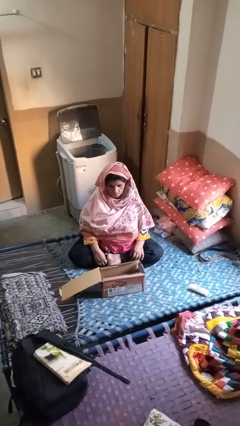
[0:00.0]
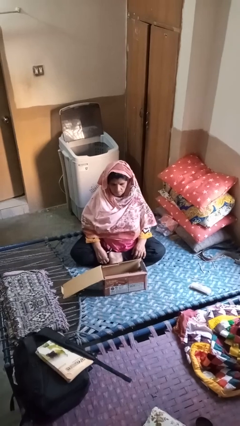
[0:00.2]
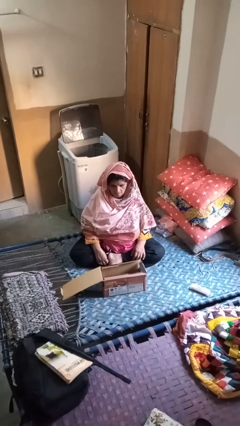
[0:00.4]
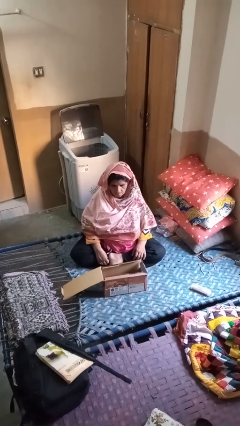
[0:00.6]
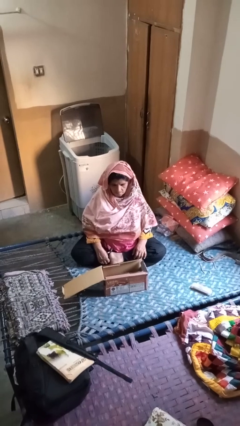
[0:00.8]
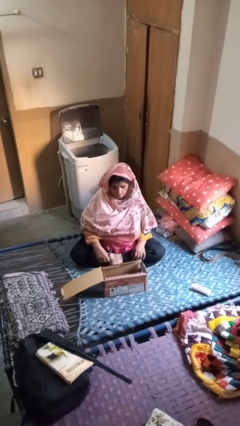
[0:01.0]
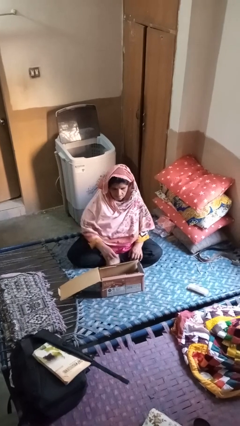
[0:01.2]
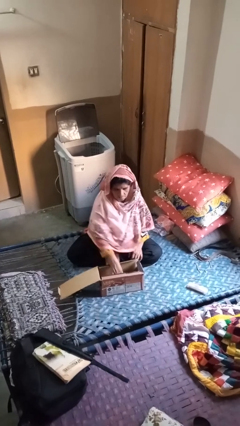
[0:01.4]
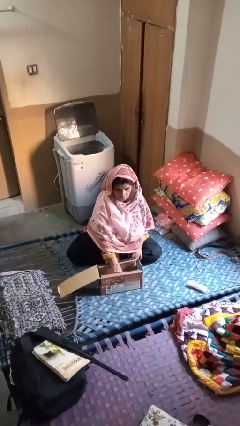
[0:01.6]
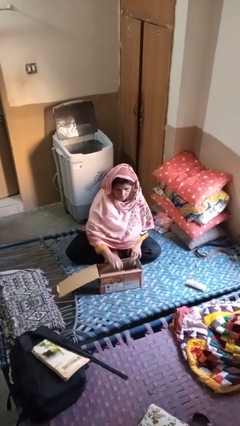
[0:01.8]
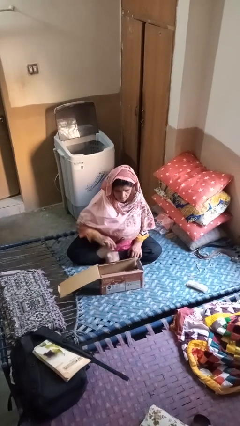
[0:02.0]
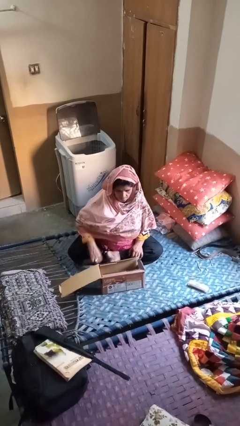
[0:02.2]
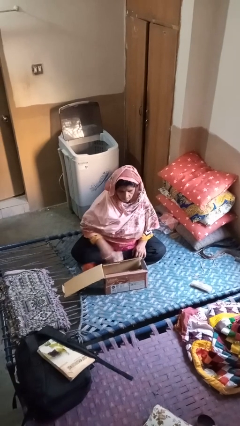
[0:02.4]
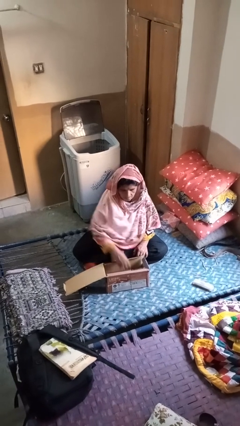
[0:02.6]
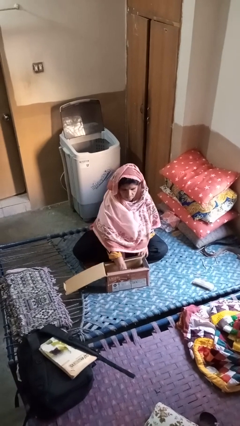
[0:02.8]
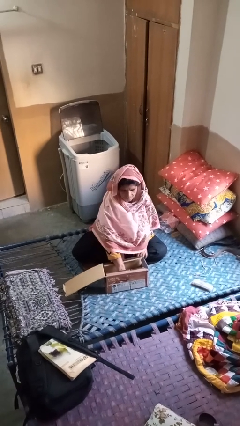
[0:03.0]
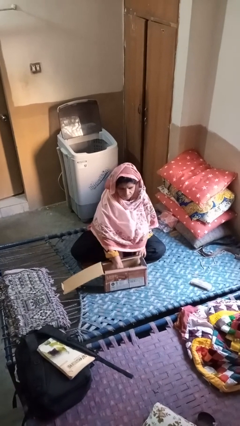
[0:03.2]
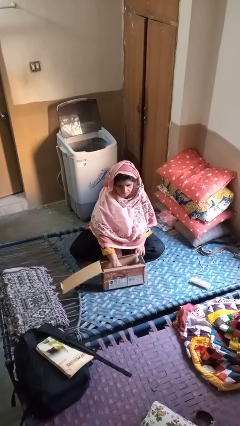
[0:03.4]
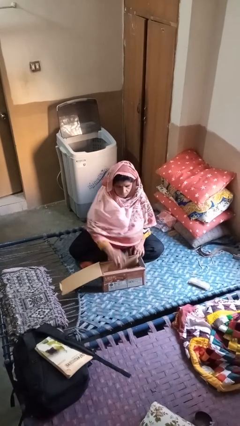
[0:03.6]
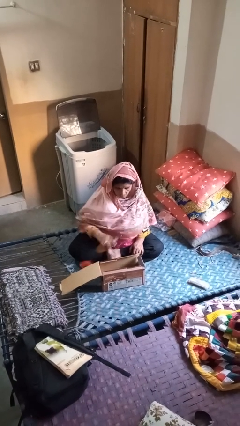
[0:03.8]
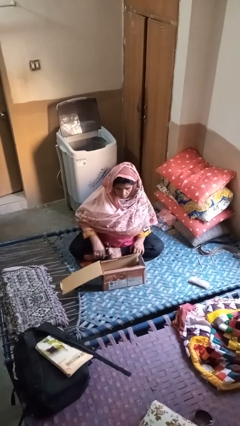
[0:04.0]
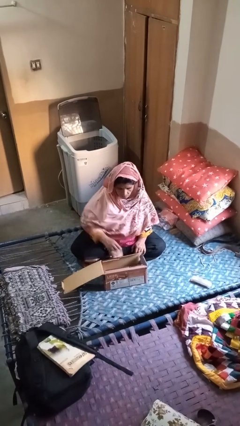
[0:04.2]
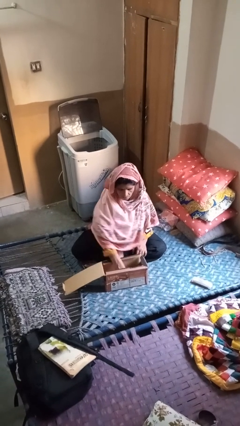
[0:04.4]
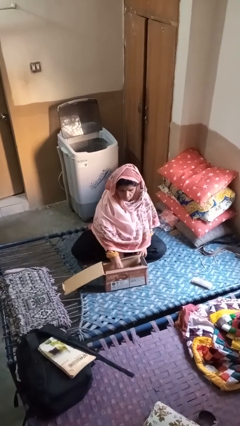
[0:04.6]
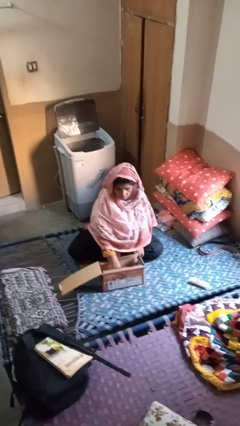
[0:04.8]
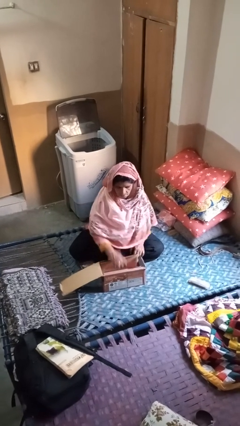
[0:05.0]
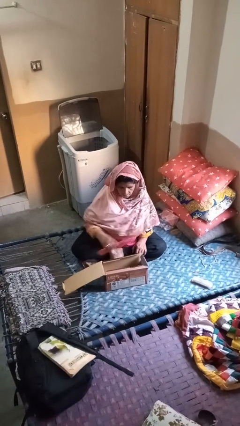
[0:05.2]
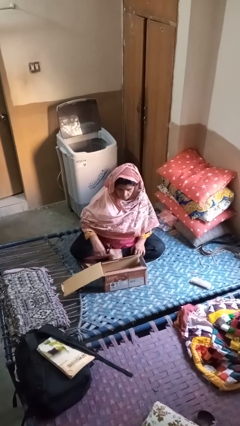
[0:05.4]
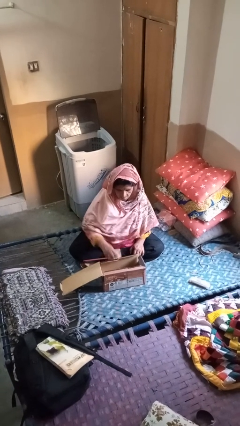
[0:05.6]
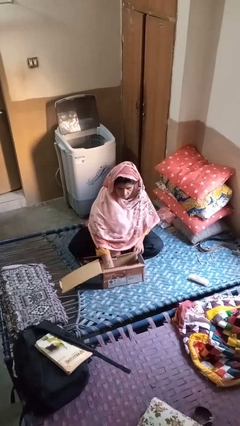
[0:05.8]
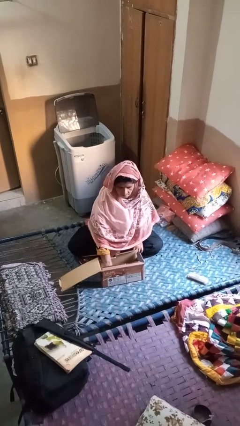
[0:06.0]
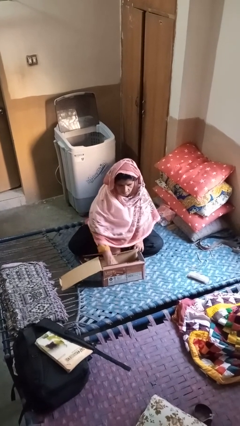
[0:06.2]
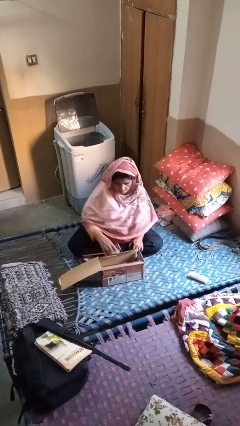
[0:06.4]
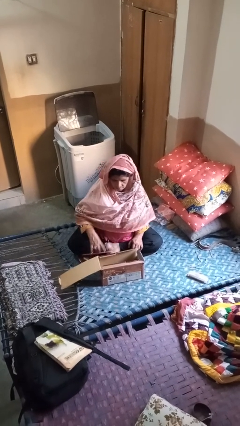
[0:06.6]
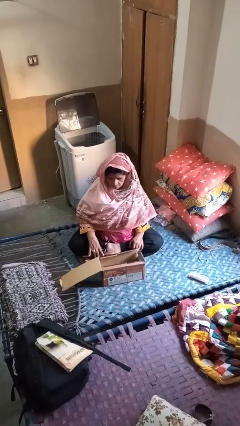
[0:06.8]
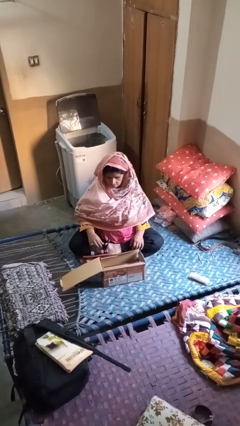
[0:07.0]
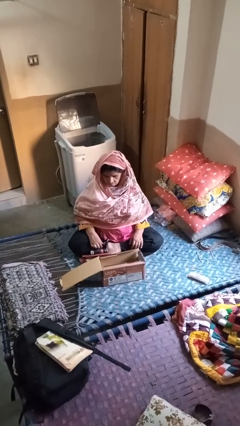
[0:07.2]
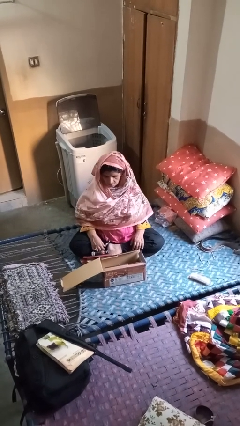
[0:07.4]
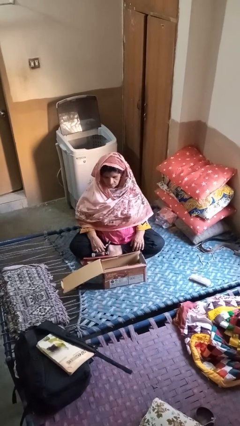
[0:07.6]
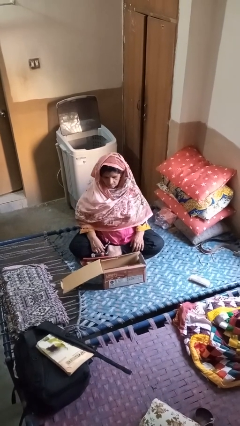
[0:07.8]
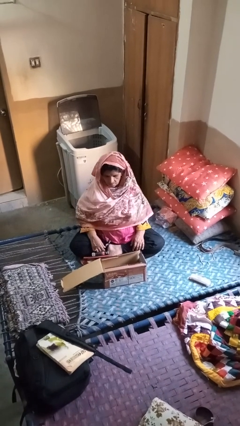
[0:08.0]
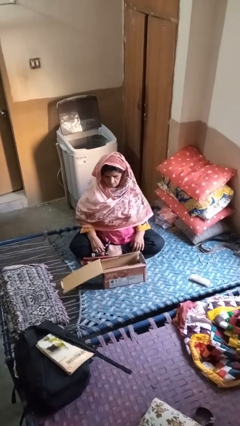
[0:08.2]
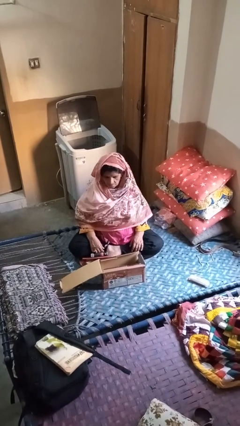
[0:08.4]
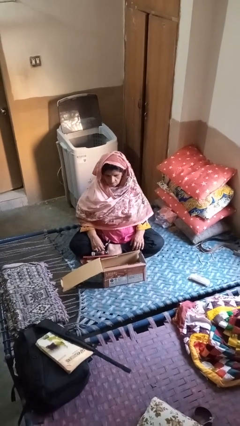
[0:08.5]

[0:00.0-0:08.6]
person takes object from box

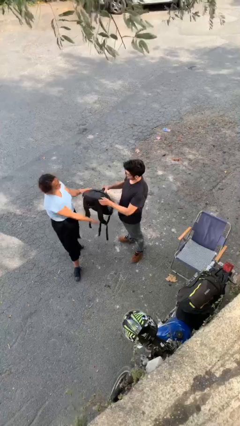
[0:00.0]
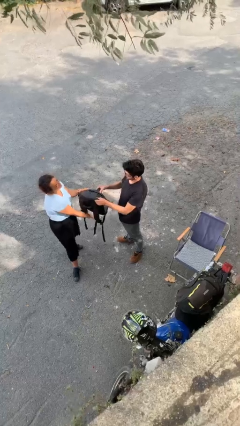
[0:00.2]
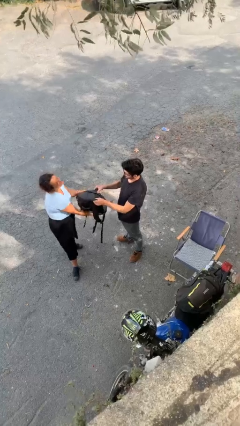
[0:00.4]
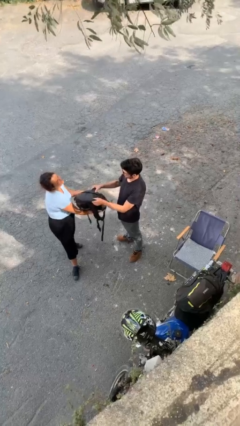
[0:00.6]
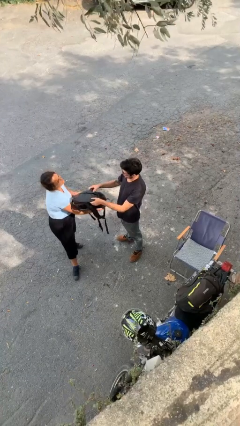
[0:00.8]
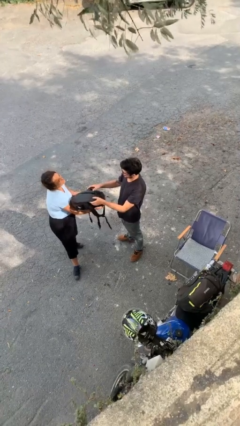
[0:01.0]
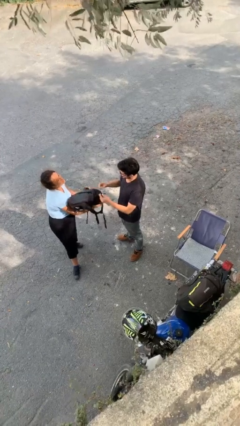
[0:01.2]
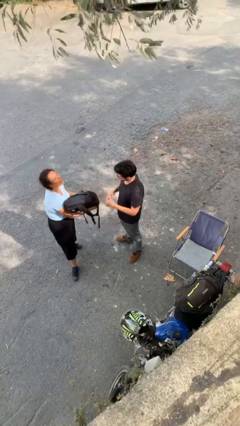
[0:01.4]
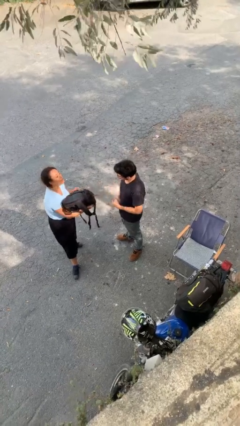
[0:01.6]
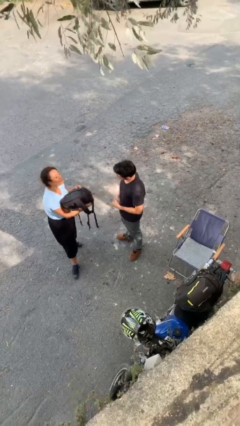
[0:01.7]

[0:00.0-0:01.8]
person transfers object to person

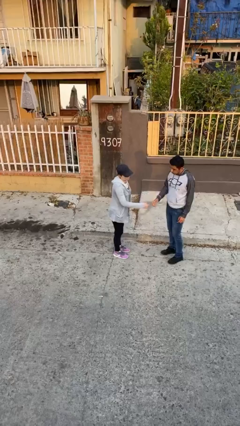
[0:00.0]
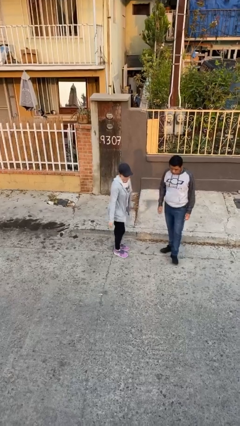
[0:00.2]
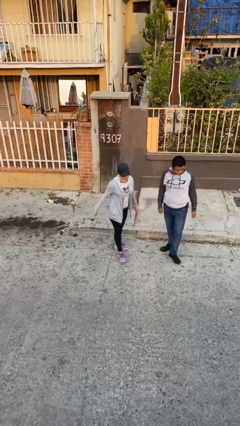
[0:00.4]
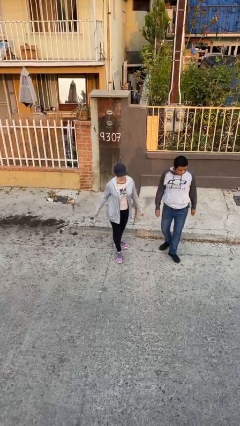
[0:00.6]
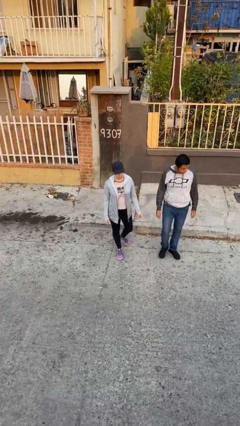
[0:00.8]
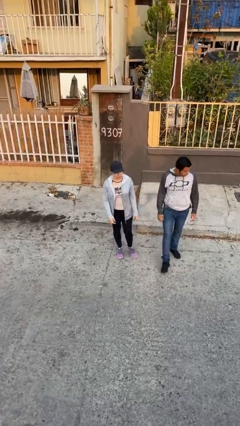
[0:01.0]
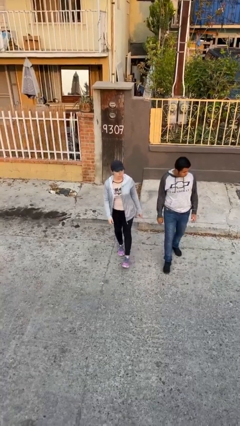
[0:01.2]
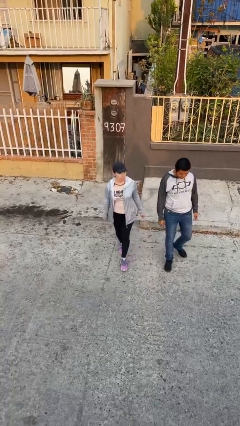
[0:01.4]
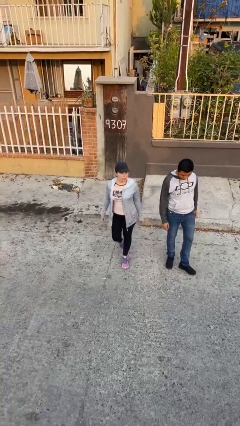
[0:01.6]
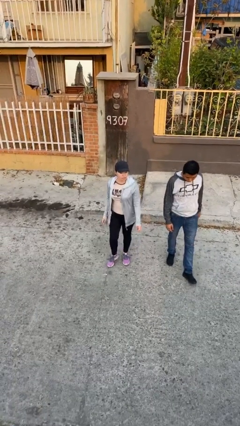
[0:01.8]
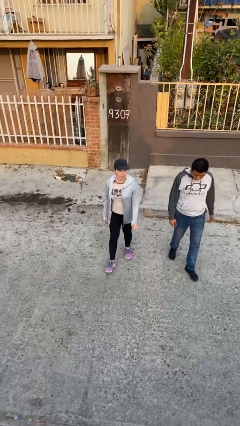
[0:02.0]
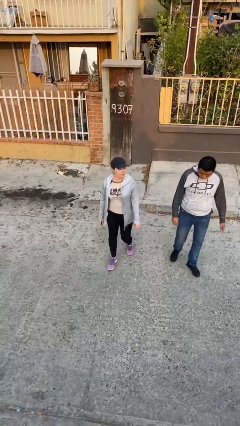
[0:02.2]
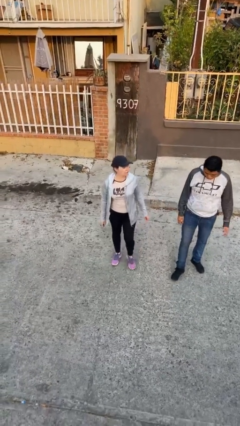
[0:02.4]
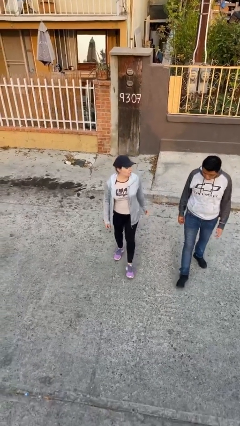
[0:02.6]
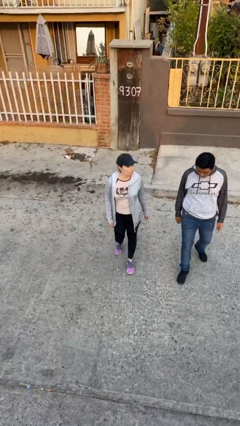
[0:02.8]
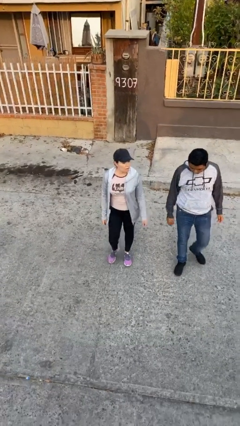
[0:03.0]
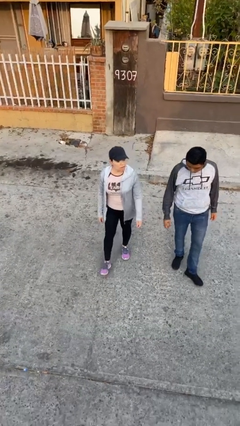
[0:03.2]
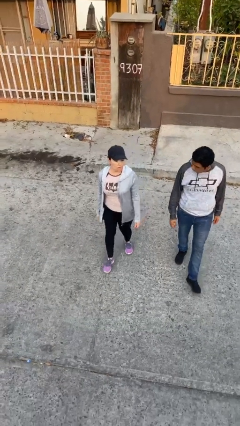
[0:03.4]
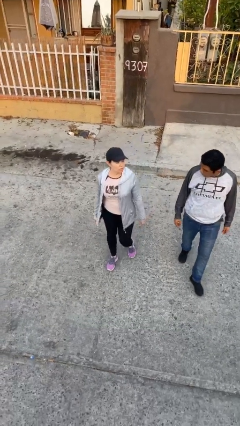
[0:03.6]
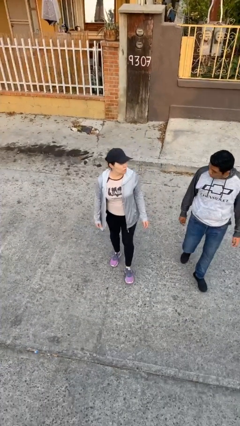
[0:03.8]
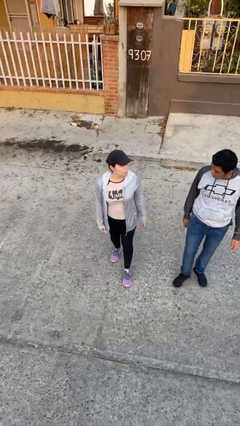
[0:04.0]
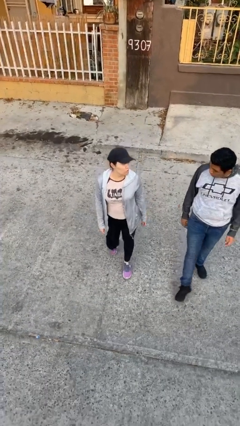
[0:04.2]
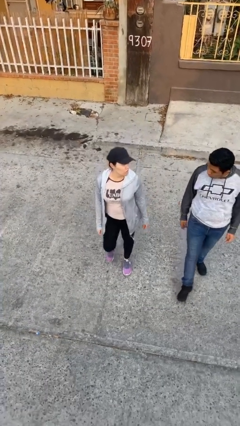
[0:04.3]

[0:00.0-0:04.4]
person talks to person

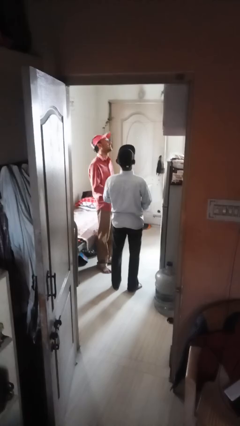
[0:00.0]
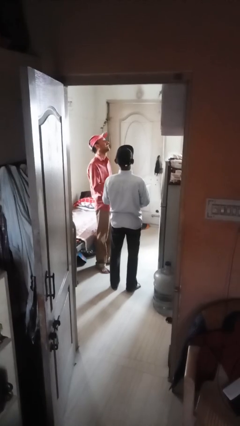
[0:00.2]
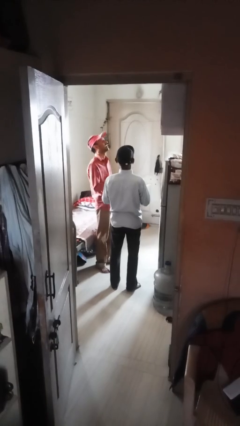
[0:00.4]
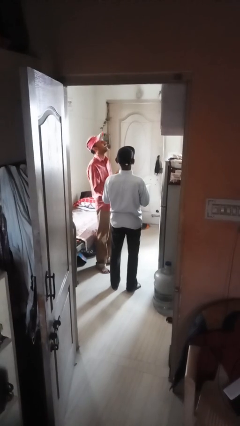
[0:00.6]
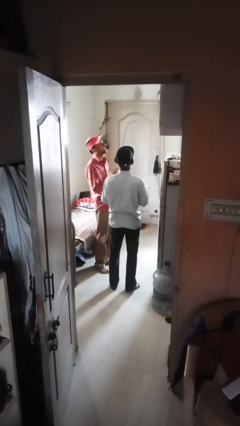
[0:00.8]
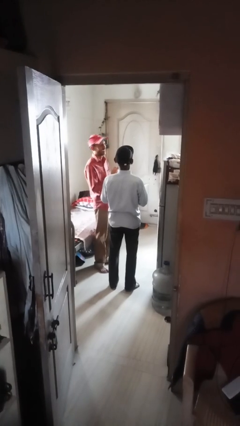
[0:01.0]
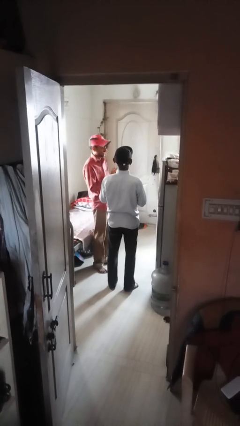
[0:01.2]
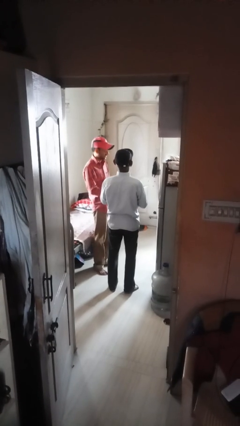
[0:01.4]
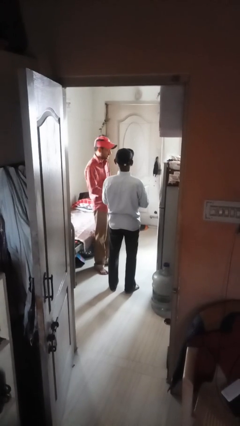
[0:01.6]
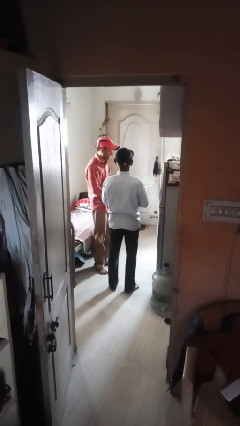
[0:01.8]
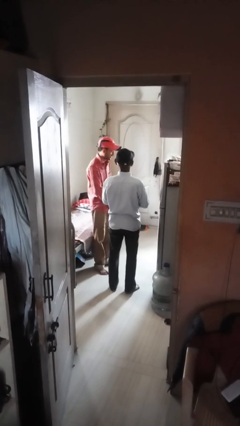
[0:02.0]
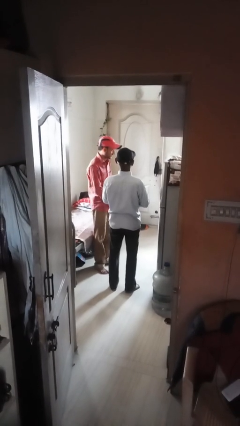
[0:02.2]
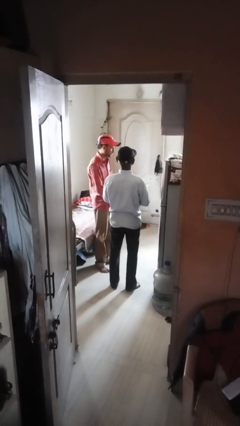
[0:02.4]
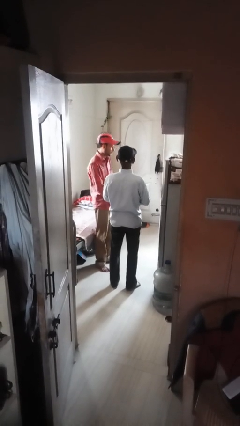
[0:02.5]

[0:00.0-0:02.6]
person laughs with person
